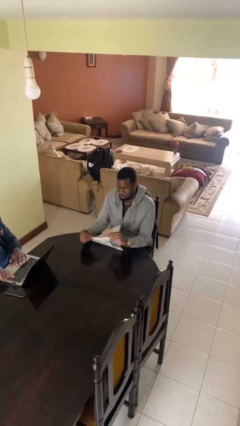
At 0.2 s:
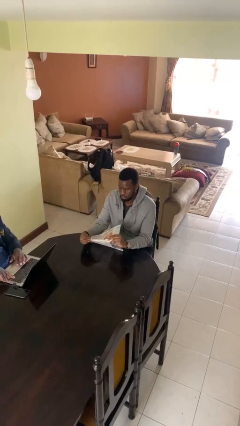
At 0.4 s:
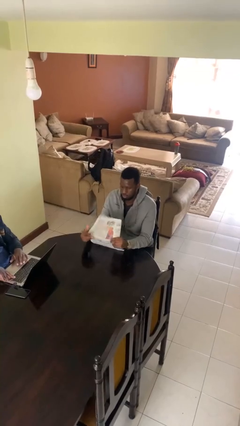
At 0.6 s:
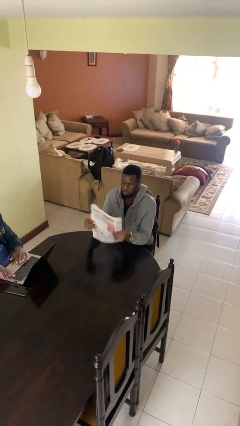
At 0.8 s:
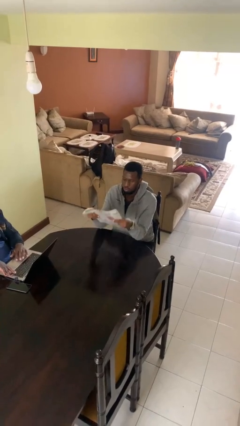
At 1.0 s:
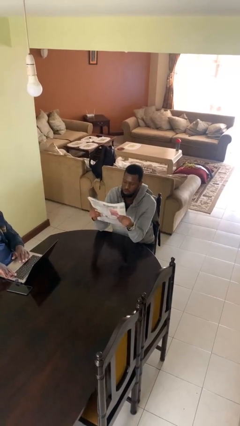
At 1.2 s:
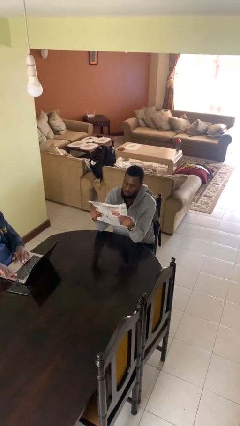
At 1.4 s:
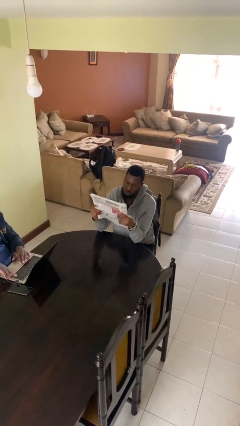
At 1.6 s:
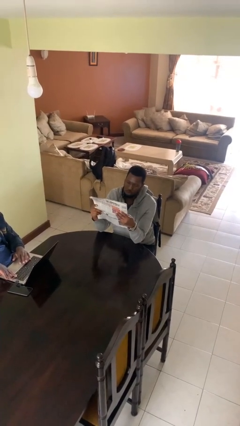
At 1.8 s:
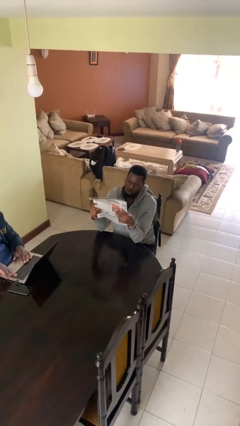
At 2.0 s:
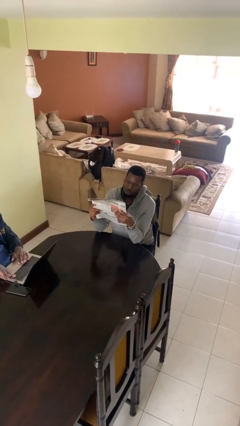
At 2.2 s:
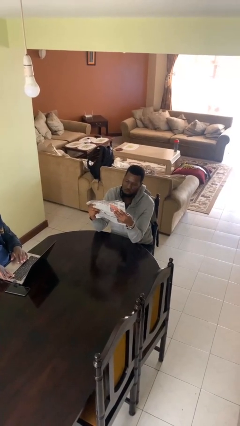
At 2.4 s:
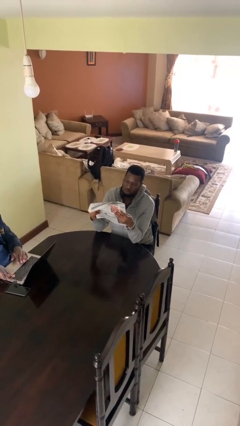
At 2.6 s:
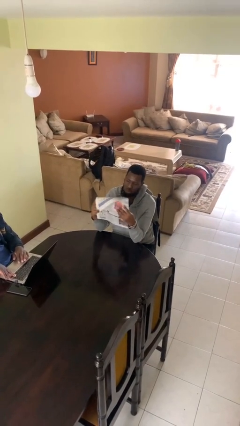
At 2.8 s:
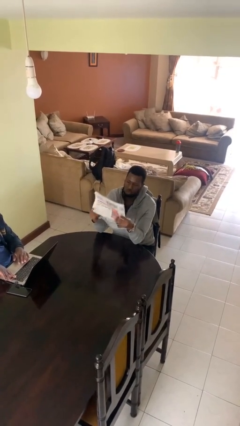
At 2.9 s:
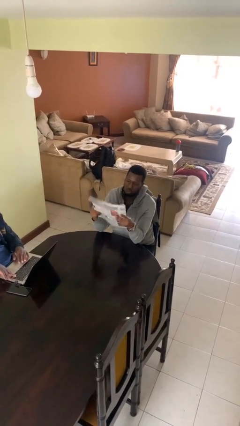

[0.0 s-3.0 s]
person reads document

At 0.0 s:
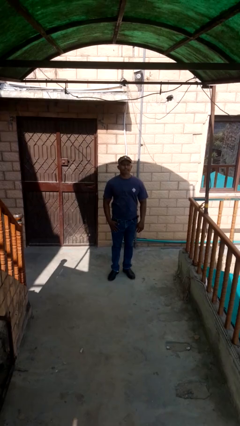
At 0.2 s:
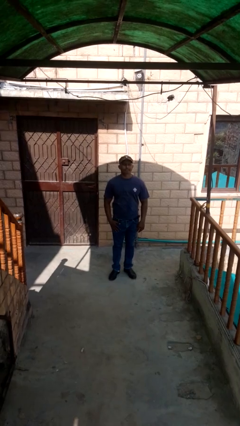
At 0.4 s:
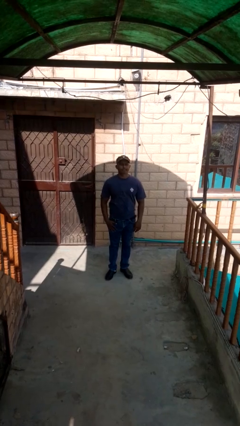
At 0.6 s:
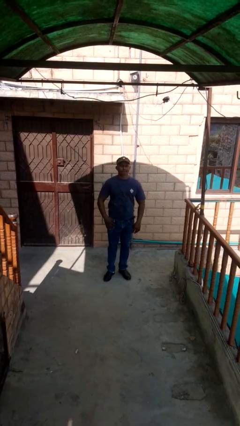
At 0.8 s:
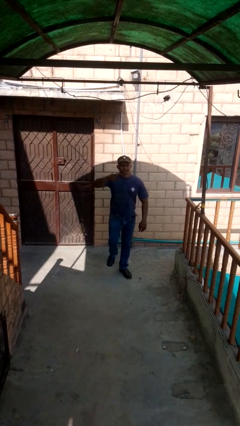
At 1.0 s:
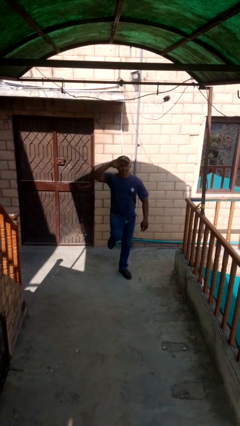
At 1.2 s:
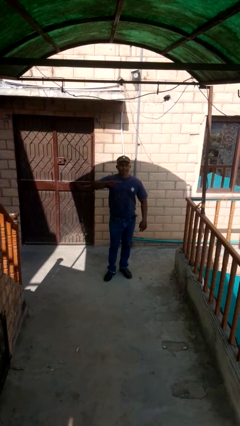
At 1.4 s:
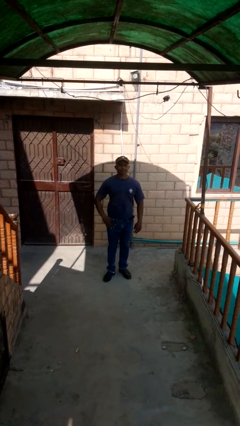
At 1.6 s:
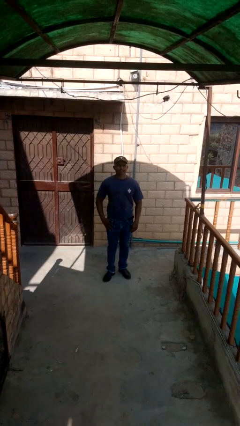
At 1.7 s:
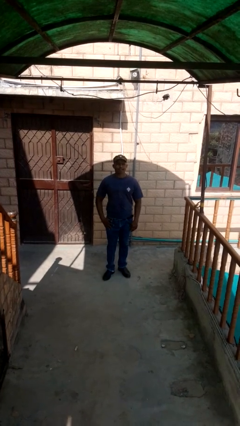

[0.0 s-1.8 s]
person salutes

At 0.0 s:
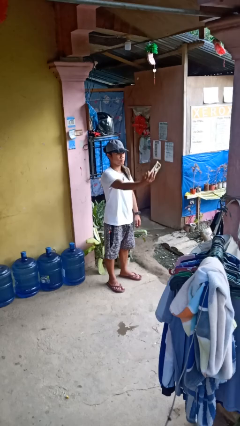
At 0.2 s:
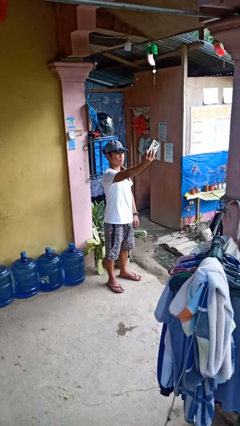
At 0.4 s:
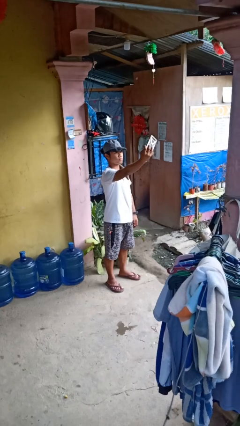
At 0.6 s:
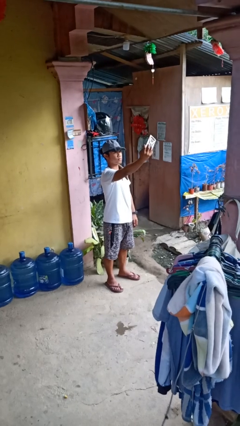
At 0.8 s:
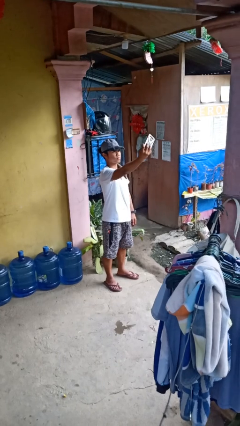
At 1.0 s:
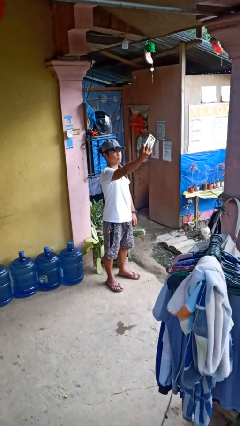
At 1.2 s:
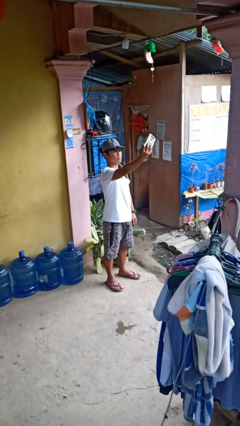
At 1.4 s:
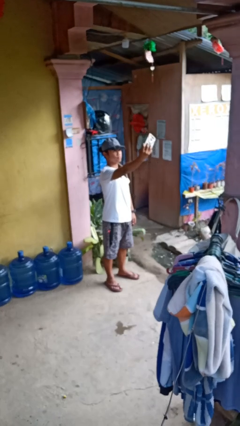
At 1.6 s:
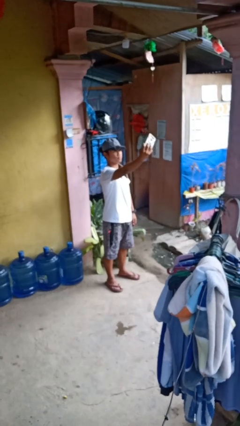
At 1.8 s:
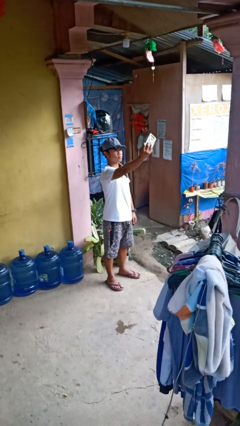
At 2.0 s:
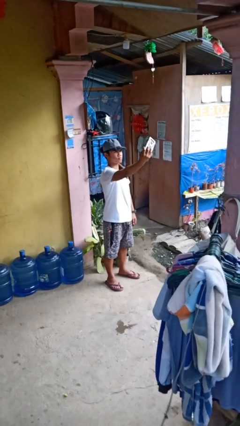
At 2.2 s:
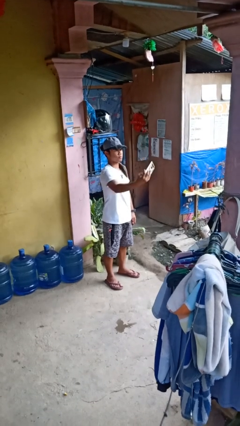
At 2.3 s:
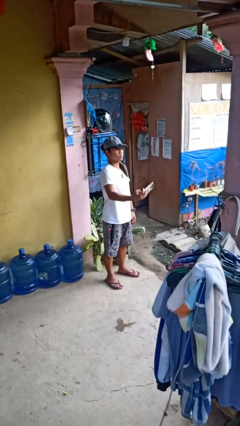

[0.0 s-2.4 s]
person takes selfie

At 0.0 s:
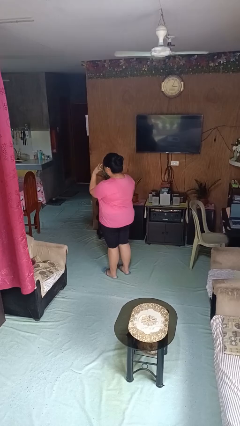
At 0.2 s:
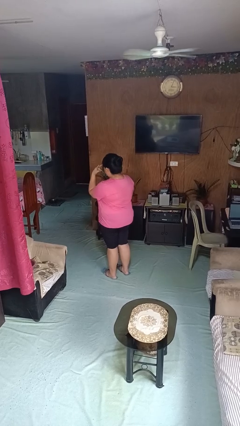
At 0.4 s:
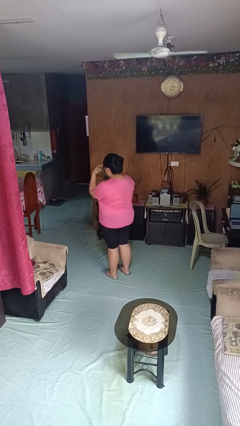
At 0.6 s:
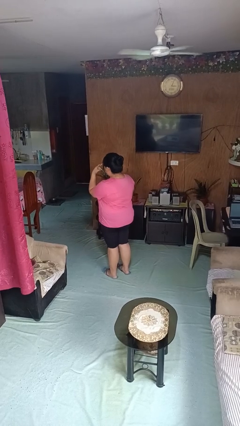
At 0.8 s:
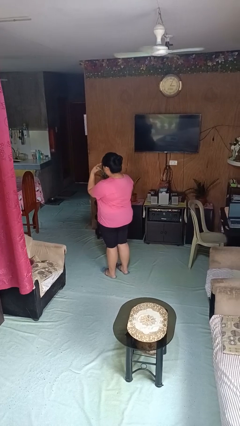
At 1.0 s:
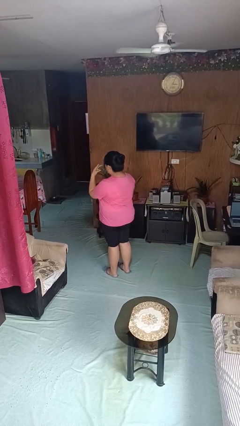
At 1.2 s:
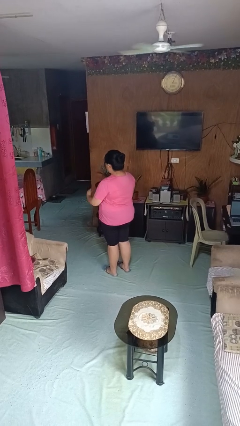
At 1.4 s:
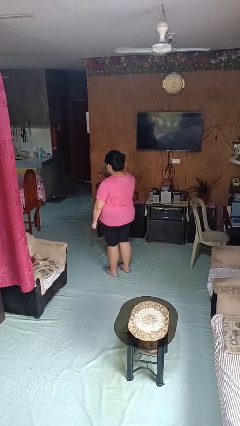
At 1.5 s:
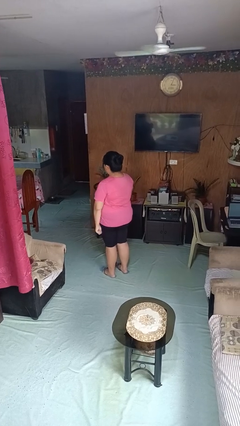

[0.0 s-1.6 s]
person gestures watch closely

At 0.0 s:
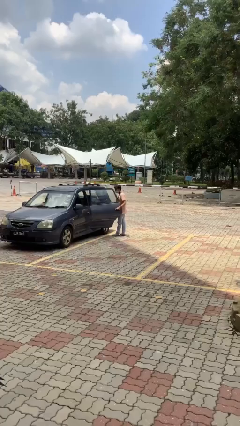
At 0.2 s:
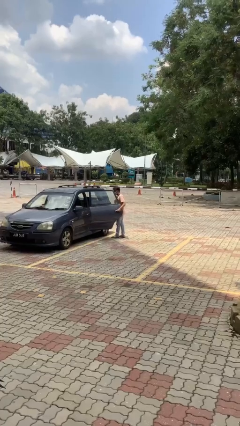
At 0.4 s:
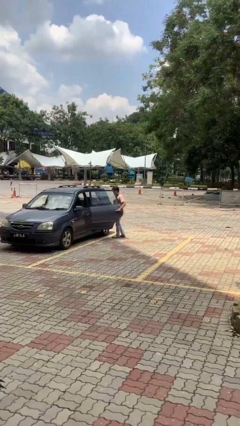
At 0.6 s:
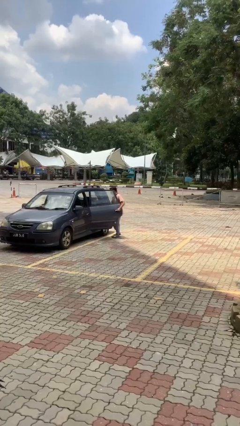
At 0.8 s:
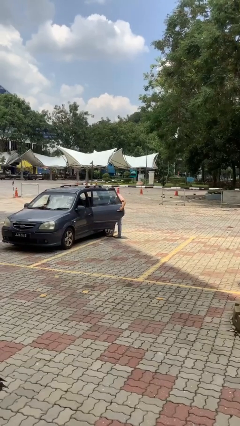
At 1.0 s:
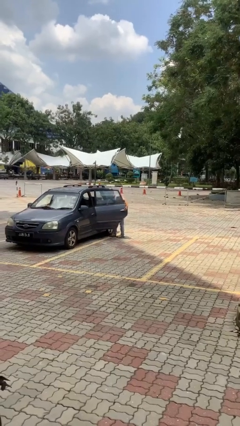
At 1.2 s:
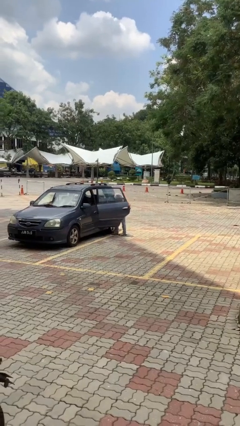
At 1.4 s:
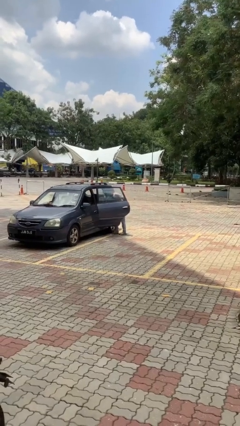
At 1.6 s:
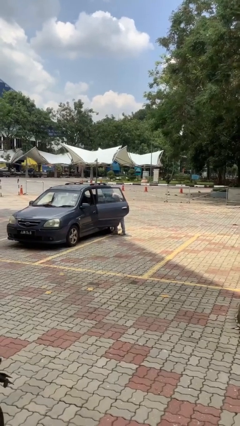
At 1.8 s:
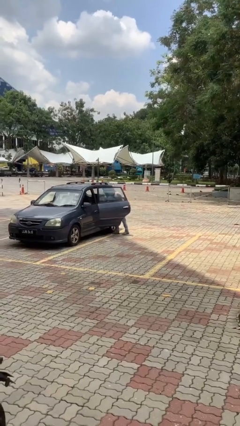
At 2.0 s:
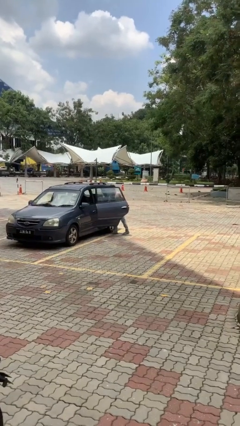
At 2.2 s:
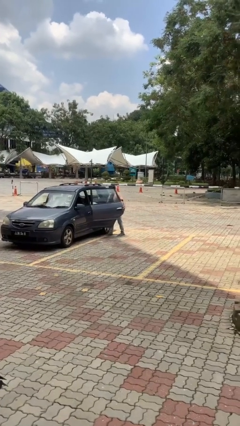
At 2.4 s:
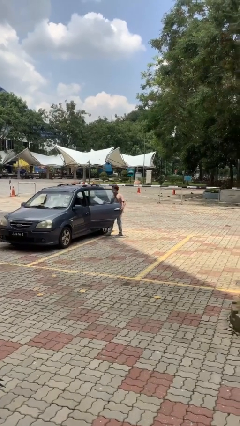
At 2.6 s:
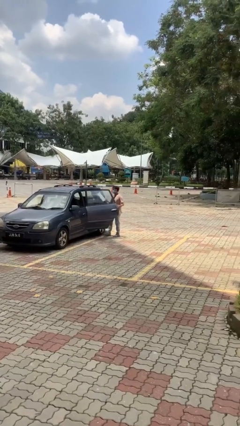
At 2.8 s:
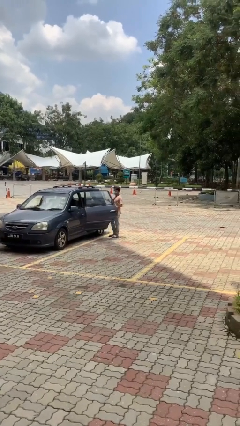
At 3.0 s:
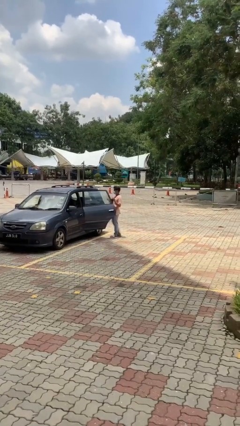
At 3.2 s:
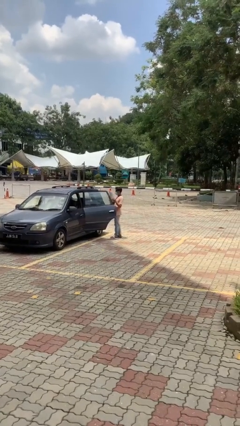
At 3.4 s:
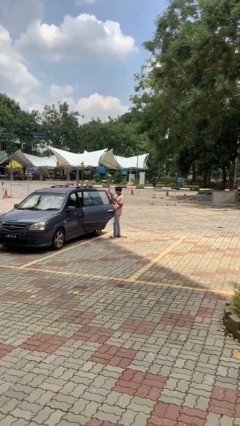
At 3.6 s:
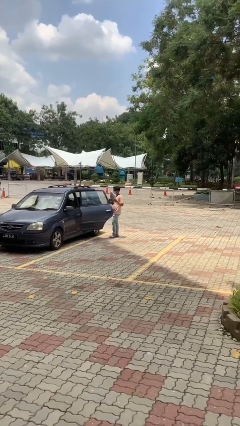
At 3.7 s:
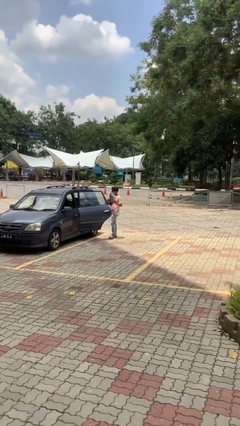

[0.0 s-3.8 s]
person unloads car

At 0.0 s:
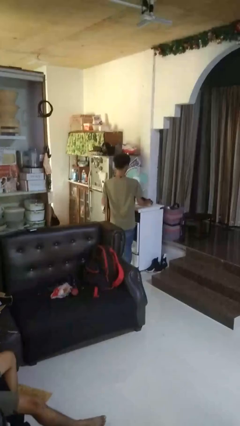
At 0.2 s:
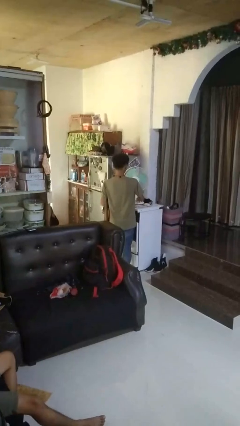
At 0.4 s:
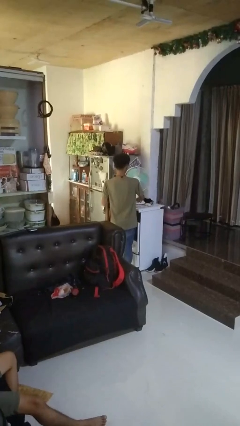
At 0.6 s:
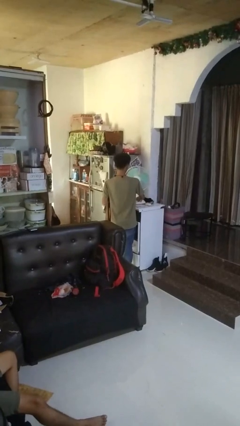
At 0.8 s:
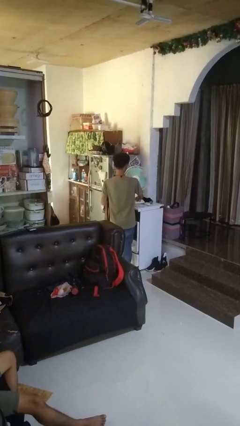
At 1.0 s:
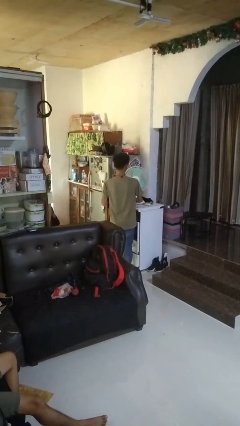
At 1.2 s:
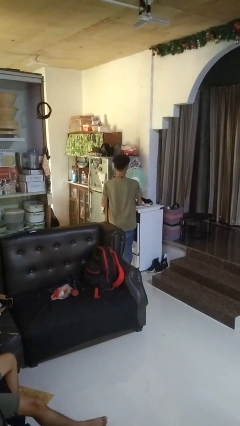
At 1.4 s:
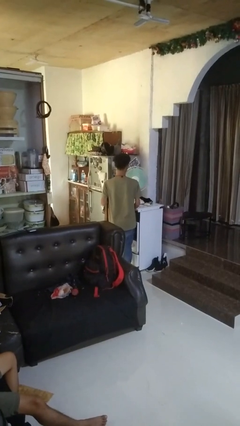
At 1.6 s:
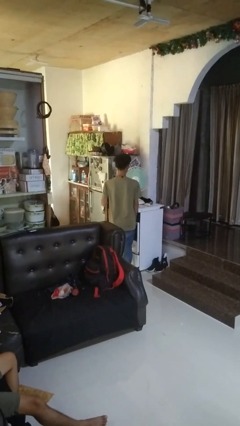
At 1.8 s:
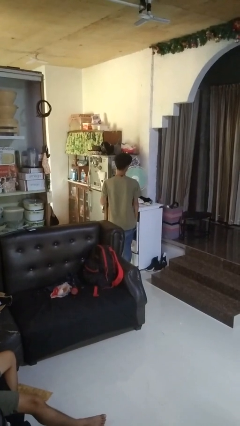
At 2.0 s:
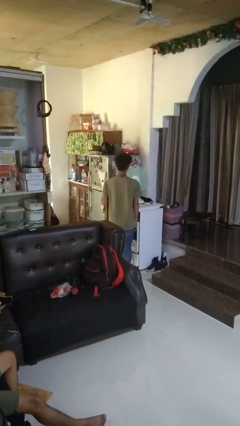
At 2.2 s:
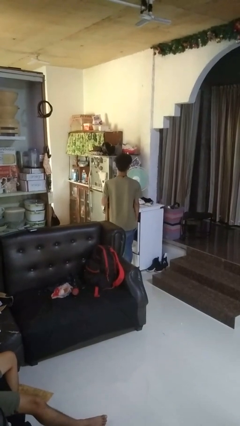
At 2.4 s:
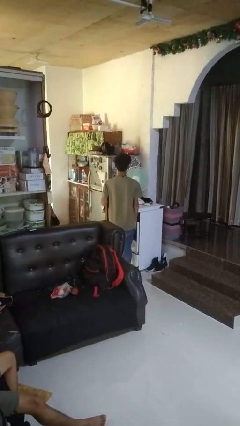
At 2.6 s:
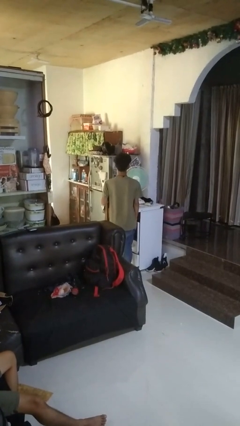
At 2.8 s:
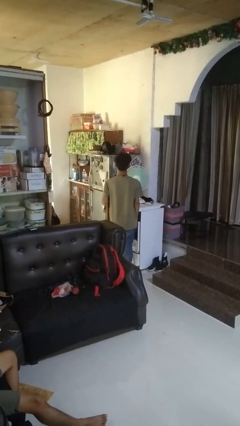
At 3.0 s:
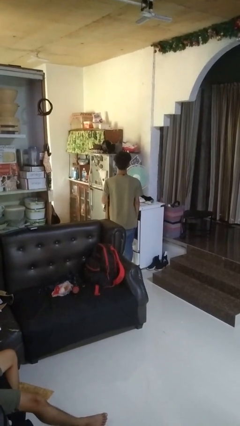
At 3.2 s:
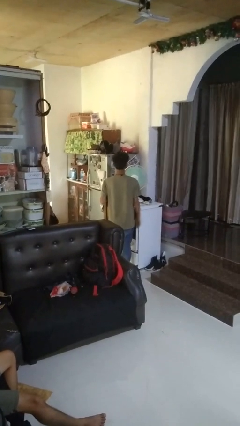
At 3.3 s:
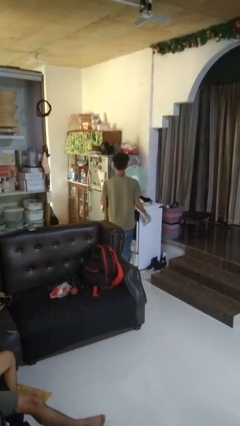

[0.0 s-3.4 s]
person turns on fan

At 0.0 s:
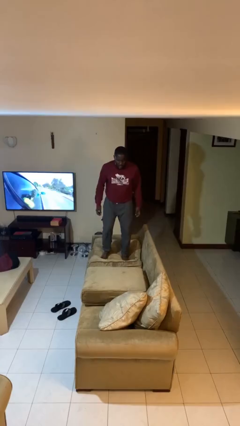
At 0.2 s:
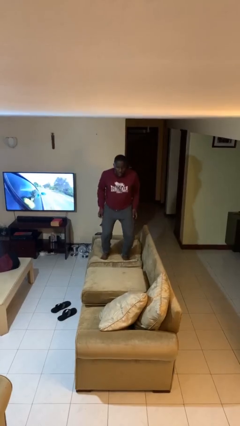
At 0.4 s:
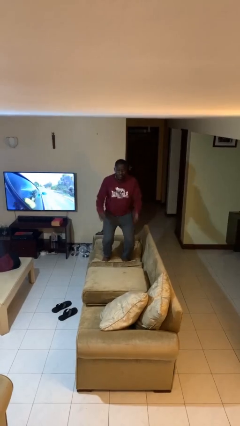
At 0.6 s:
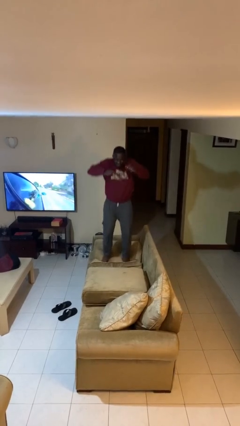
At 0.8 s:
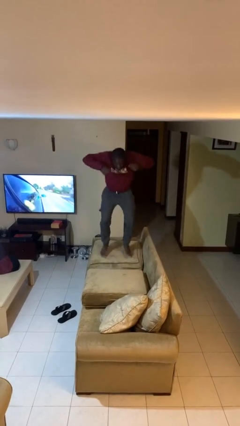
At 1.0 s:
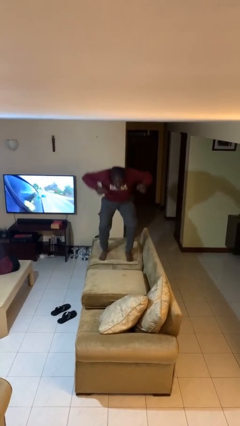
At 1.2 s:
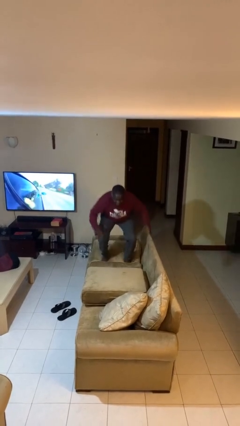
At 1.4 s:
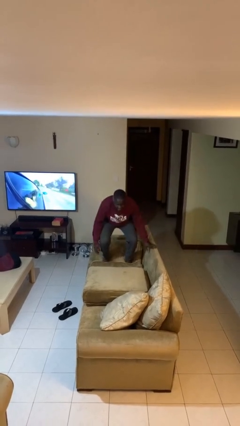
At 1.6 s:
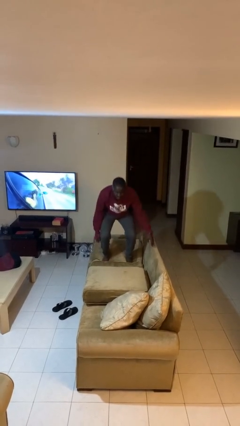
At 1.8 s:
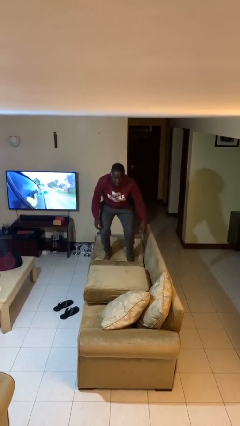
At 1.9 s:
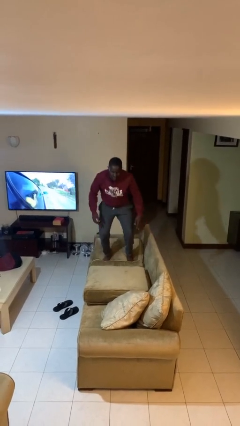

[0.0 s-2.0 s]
person jumps on couch
